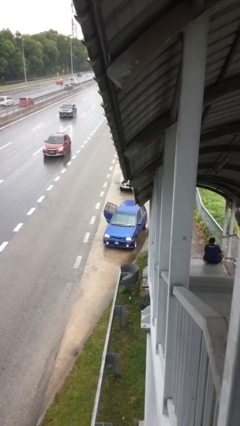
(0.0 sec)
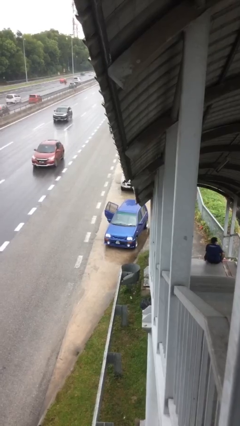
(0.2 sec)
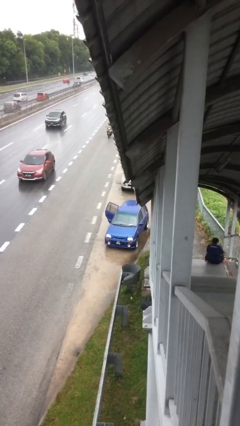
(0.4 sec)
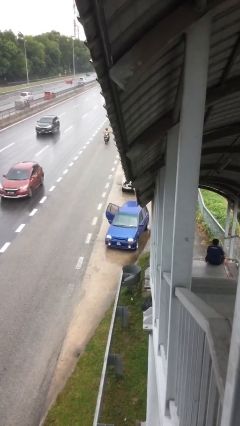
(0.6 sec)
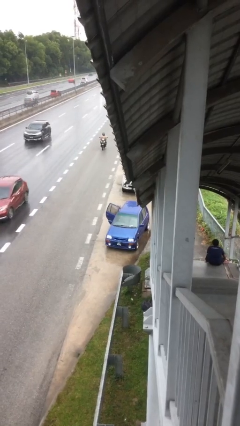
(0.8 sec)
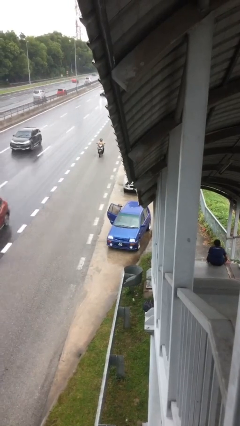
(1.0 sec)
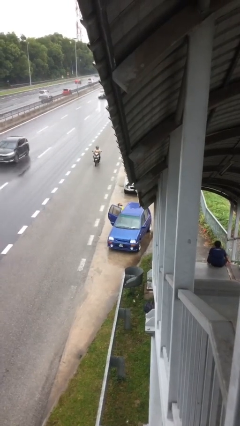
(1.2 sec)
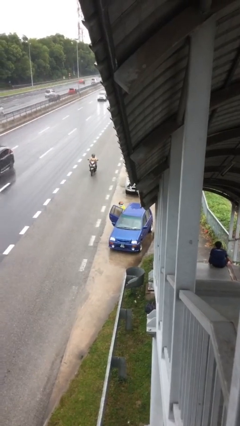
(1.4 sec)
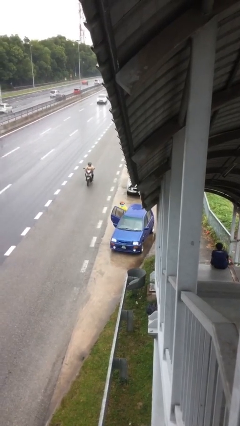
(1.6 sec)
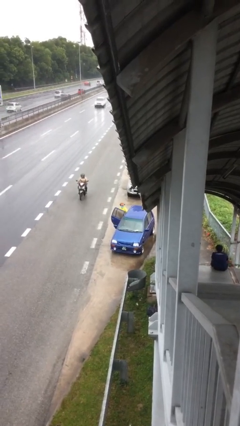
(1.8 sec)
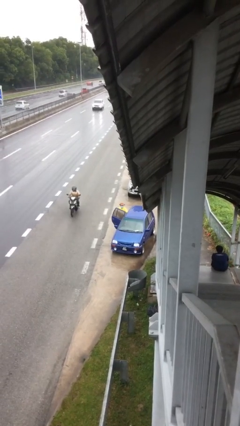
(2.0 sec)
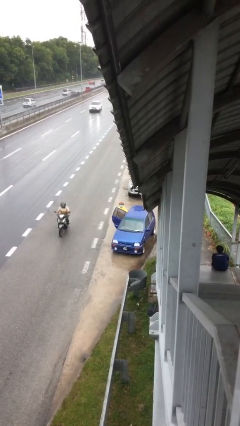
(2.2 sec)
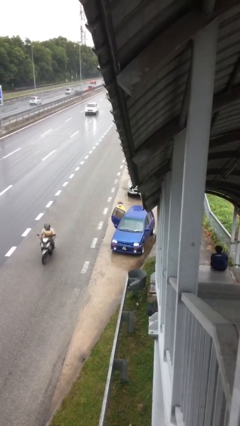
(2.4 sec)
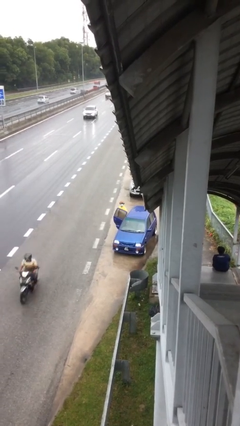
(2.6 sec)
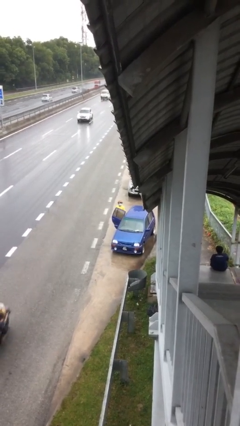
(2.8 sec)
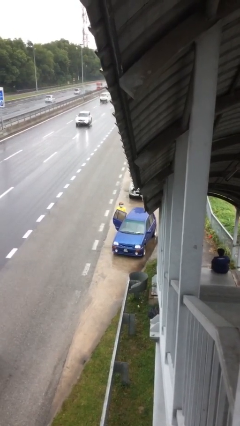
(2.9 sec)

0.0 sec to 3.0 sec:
person exits car

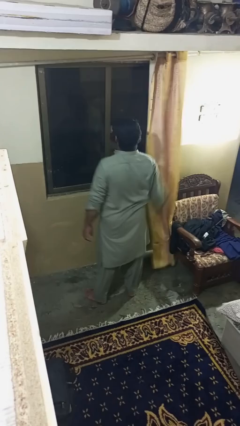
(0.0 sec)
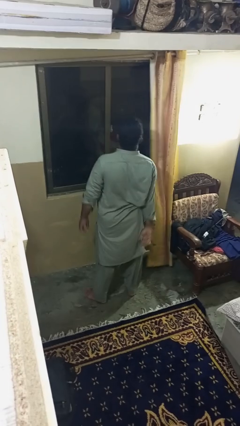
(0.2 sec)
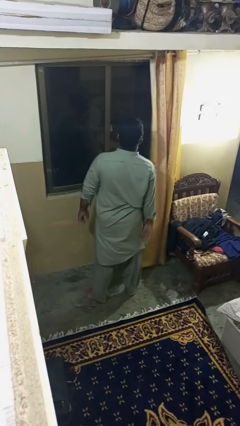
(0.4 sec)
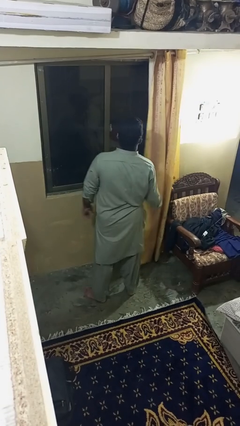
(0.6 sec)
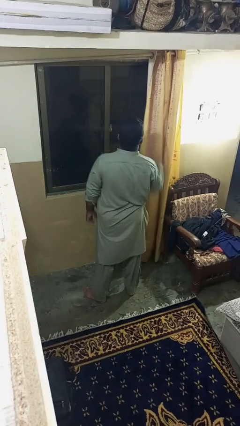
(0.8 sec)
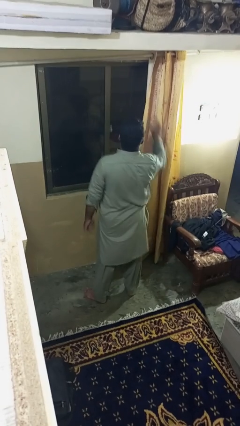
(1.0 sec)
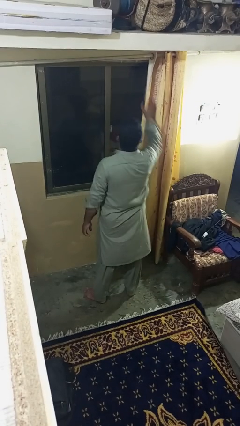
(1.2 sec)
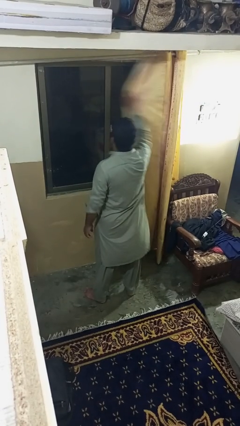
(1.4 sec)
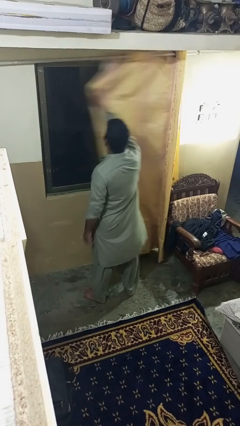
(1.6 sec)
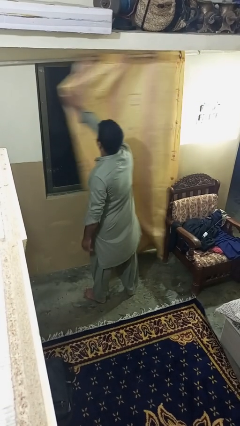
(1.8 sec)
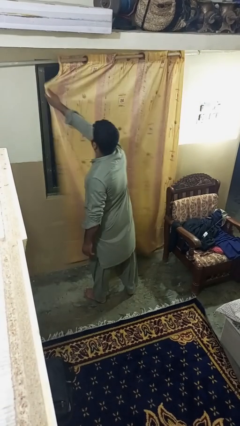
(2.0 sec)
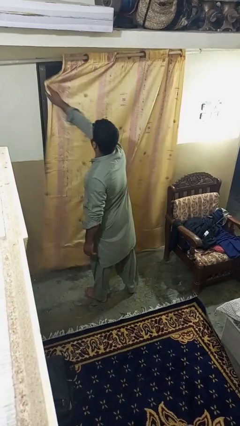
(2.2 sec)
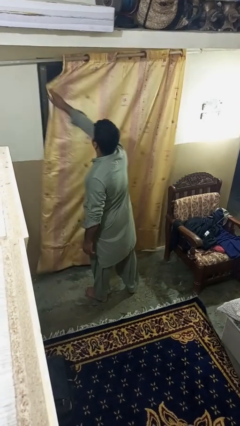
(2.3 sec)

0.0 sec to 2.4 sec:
person closes curtains

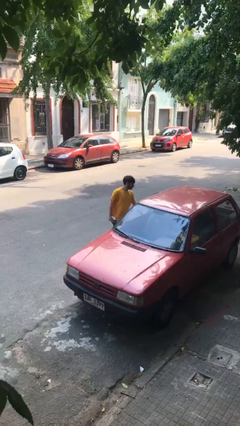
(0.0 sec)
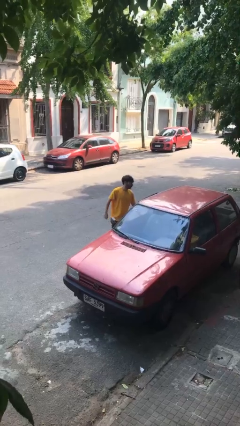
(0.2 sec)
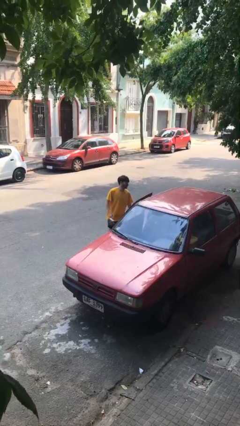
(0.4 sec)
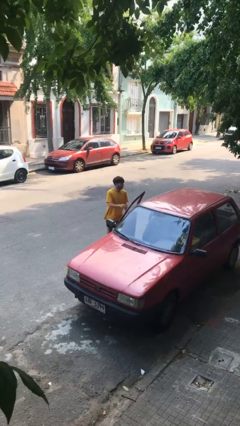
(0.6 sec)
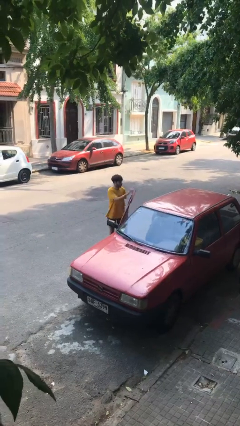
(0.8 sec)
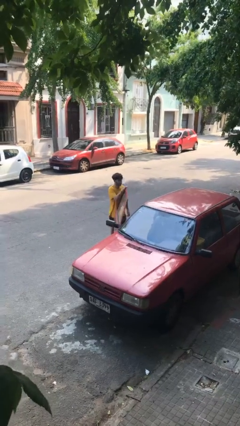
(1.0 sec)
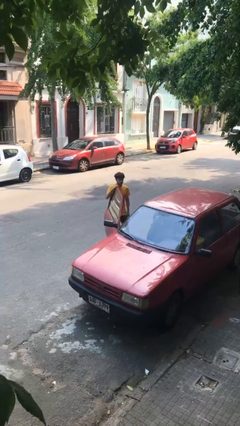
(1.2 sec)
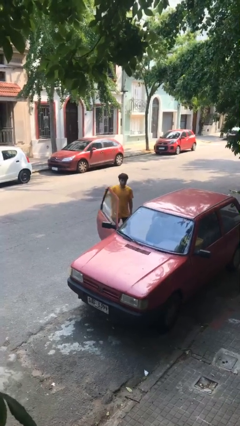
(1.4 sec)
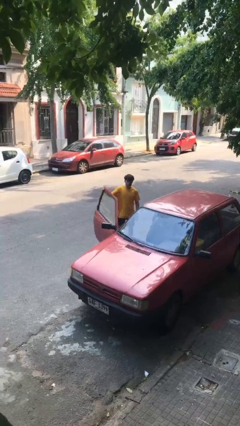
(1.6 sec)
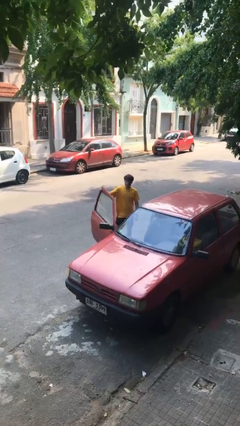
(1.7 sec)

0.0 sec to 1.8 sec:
person opens car door

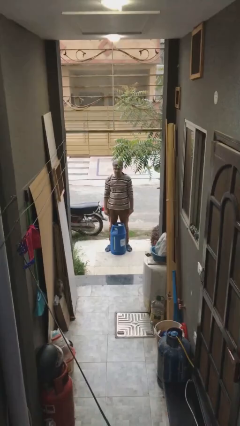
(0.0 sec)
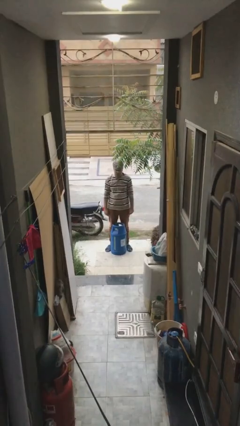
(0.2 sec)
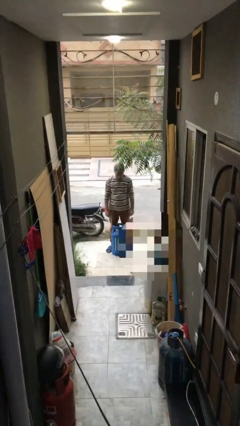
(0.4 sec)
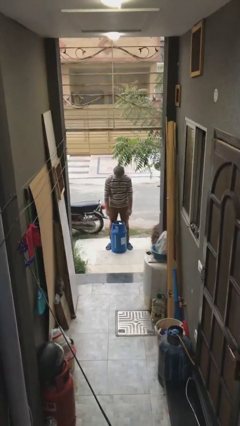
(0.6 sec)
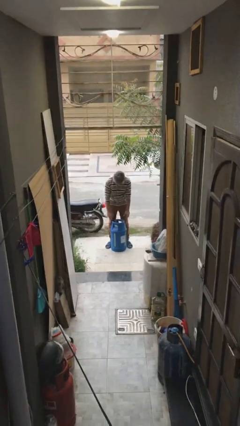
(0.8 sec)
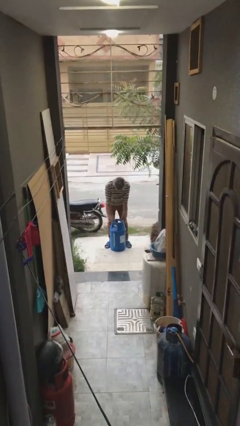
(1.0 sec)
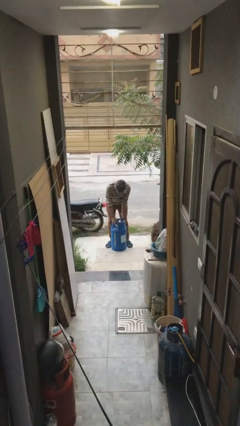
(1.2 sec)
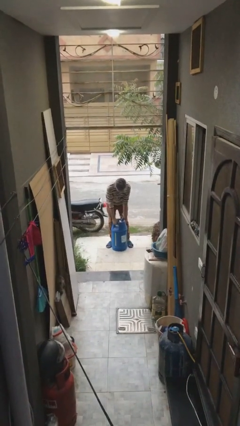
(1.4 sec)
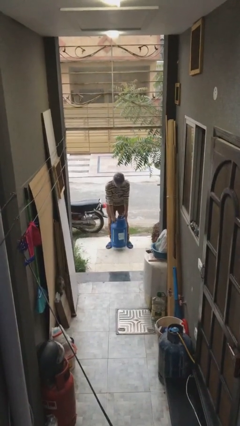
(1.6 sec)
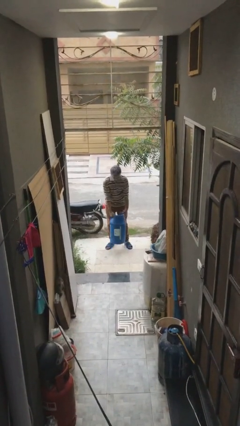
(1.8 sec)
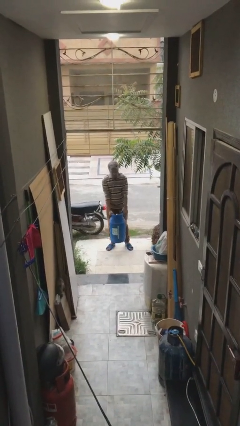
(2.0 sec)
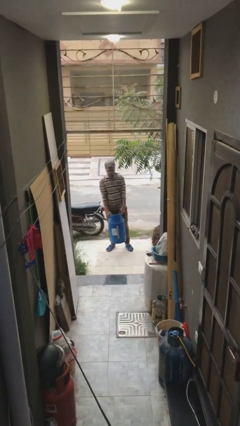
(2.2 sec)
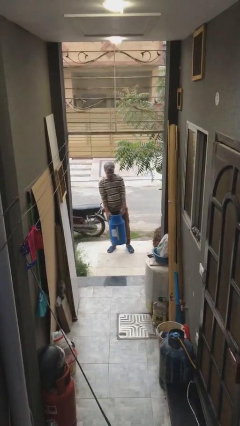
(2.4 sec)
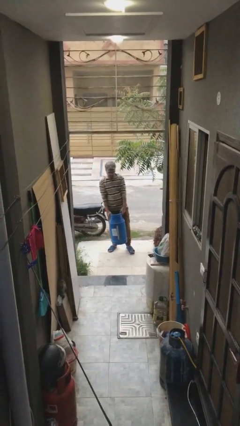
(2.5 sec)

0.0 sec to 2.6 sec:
person picks up object from floor

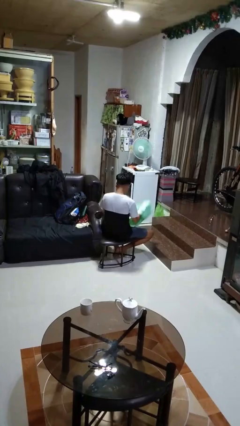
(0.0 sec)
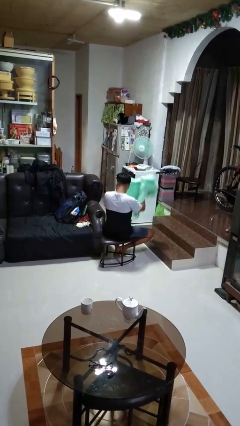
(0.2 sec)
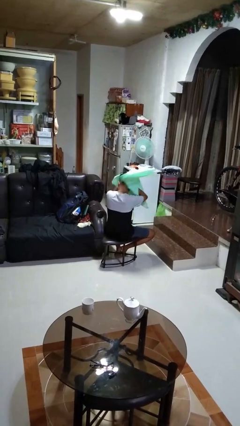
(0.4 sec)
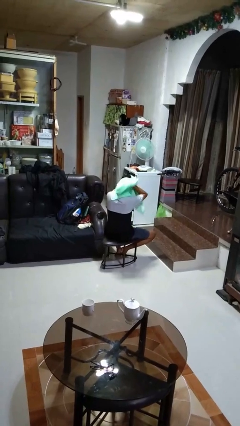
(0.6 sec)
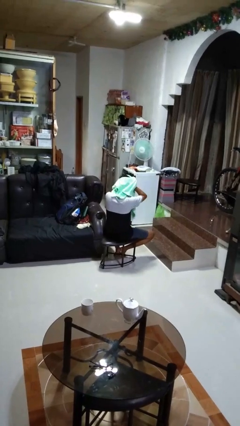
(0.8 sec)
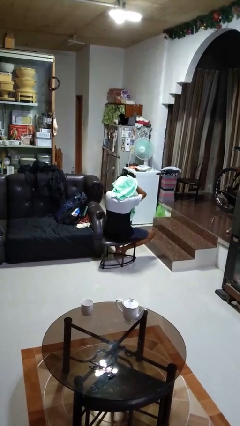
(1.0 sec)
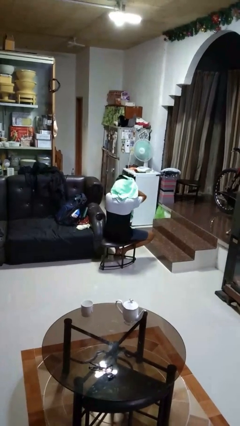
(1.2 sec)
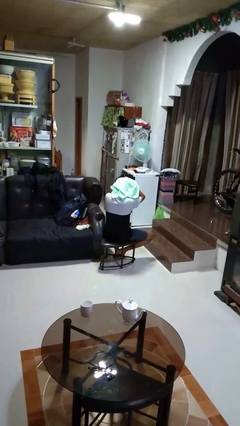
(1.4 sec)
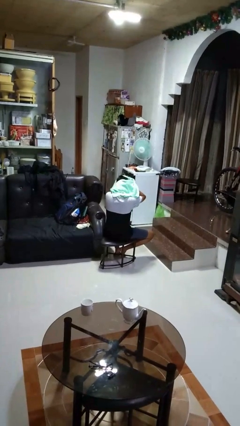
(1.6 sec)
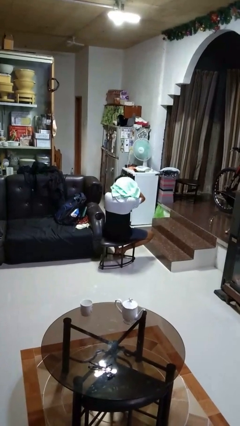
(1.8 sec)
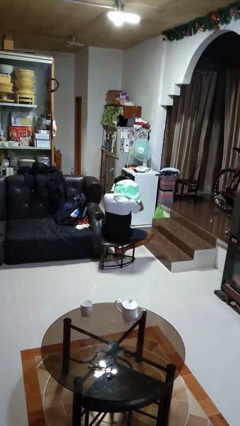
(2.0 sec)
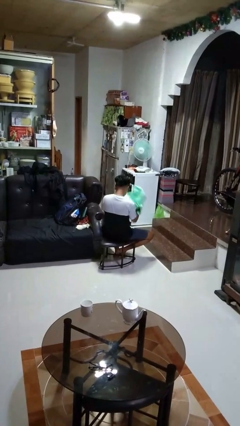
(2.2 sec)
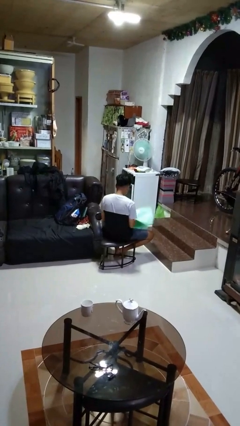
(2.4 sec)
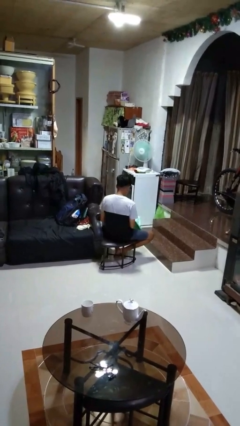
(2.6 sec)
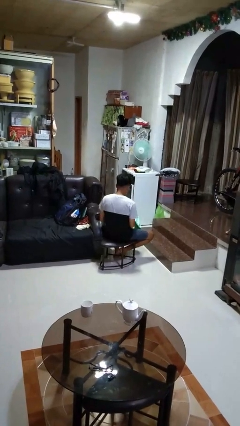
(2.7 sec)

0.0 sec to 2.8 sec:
person dries hair with towel

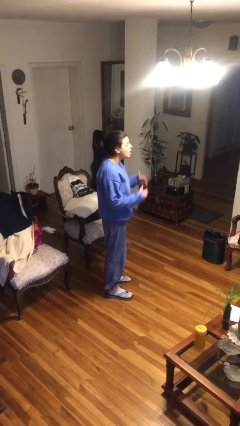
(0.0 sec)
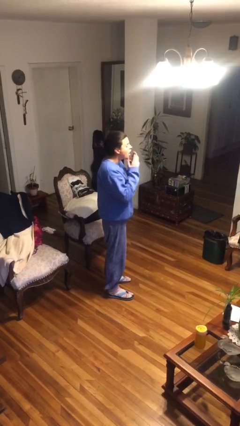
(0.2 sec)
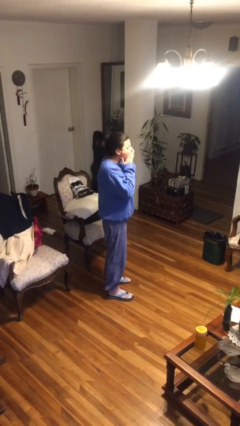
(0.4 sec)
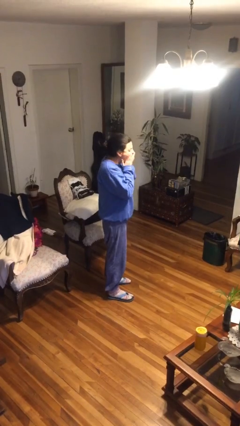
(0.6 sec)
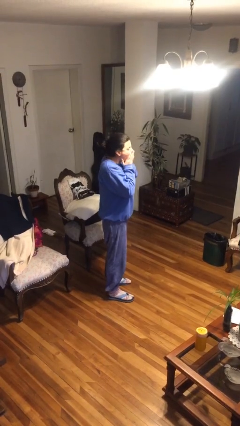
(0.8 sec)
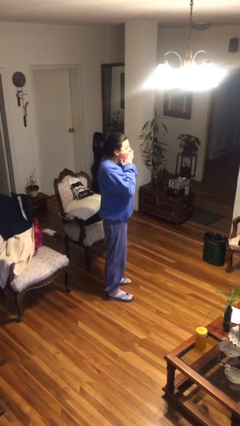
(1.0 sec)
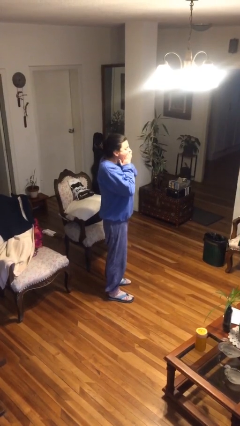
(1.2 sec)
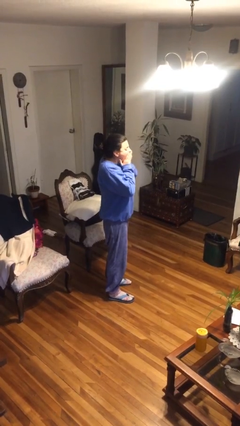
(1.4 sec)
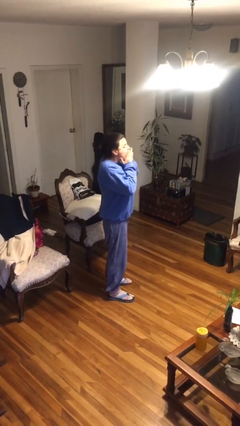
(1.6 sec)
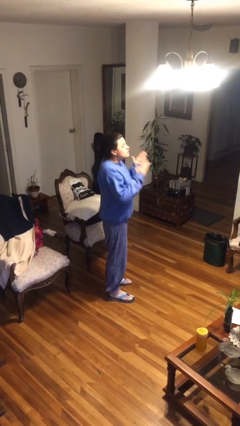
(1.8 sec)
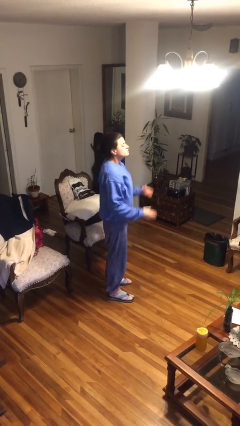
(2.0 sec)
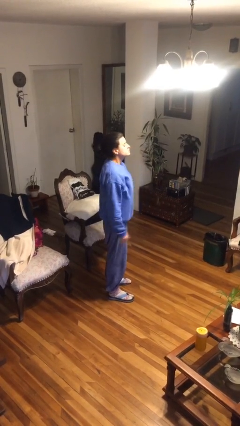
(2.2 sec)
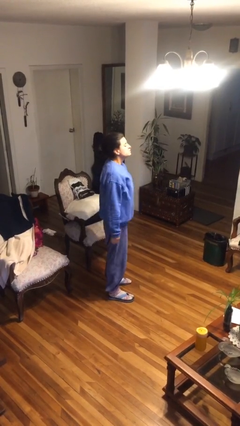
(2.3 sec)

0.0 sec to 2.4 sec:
person yawns

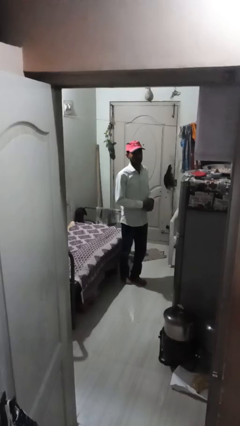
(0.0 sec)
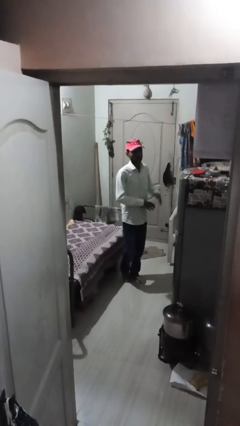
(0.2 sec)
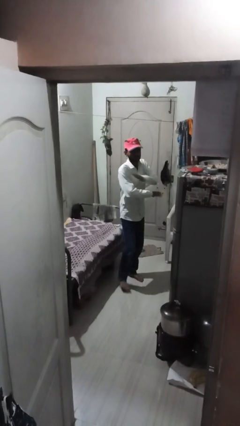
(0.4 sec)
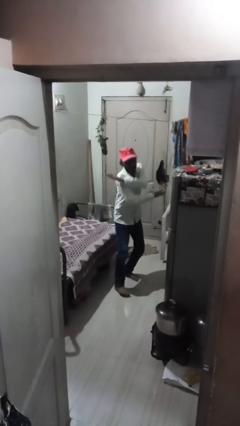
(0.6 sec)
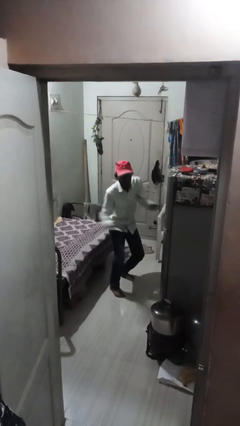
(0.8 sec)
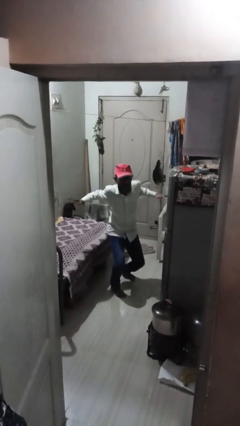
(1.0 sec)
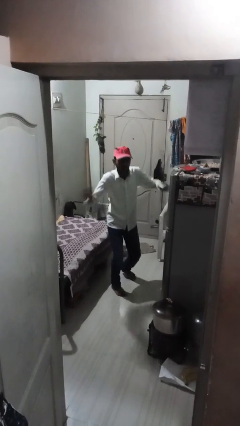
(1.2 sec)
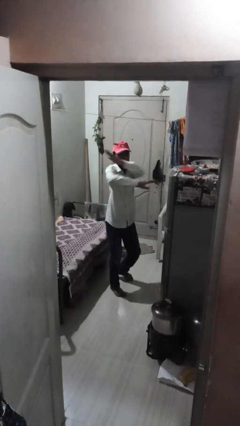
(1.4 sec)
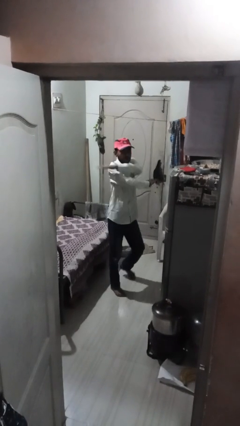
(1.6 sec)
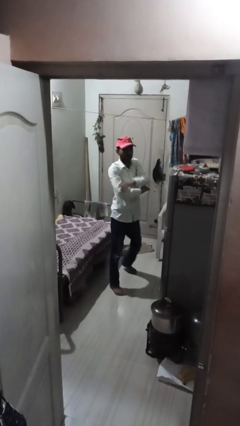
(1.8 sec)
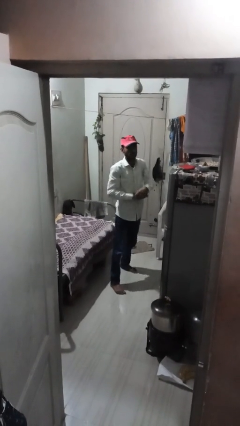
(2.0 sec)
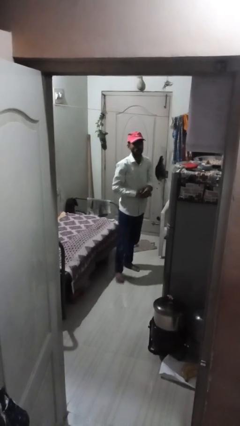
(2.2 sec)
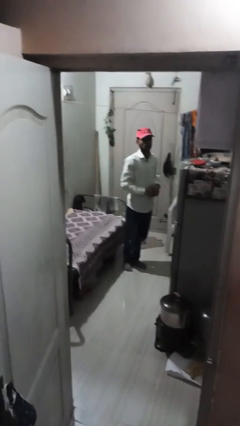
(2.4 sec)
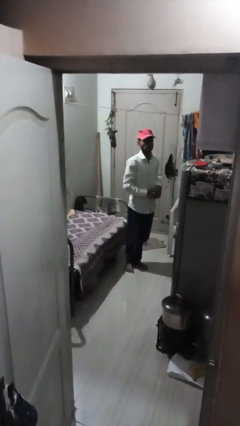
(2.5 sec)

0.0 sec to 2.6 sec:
person karate chop
